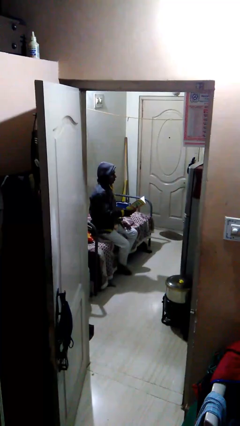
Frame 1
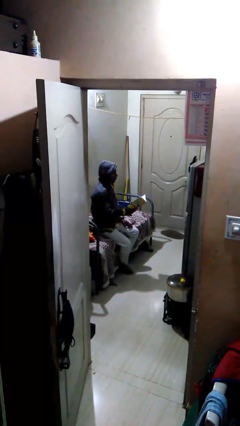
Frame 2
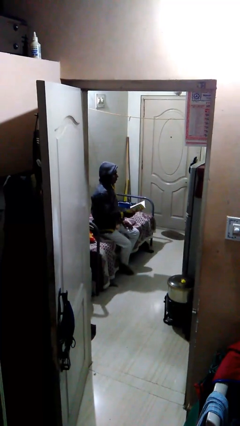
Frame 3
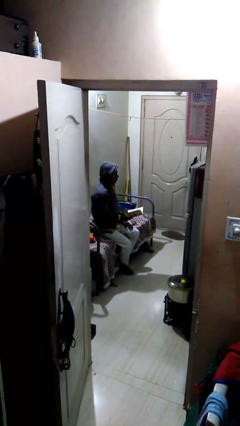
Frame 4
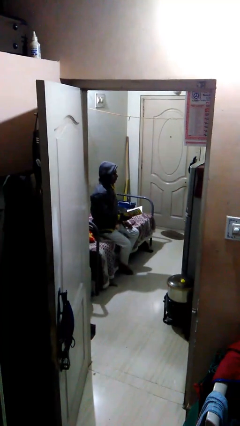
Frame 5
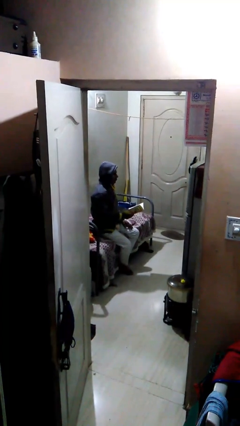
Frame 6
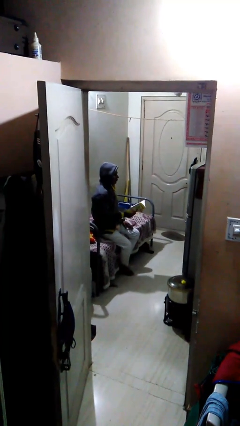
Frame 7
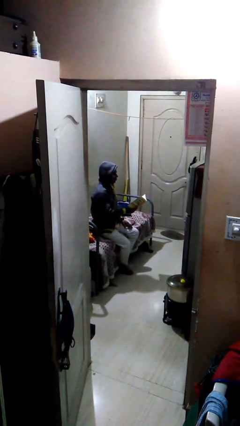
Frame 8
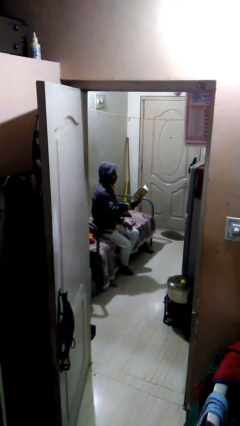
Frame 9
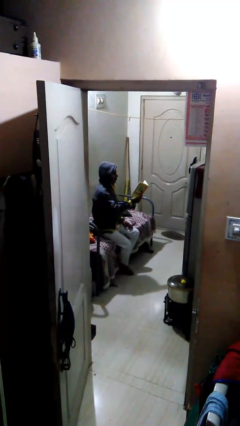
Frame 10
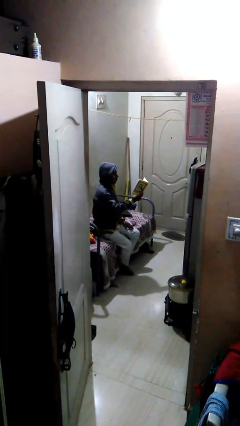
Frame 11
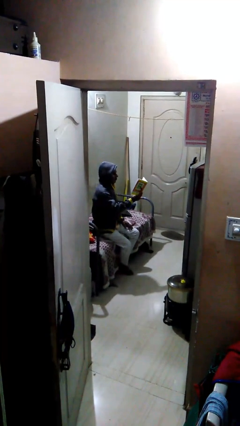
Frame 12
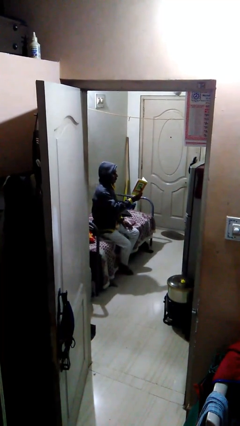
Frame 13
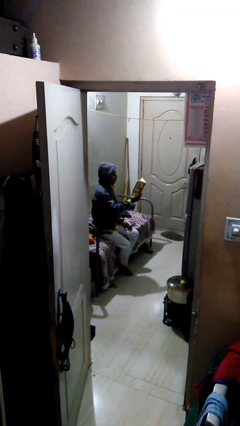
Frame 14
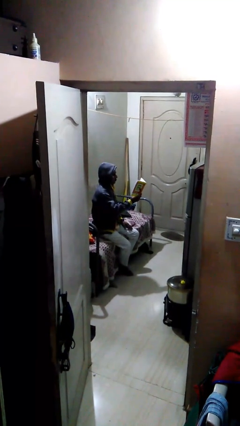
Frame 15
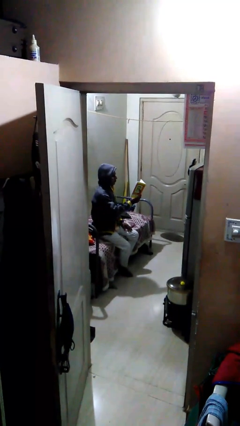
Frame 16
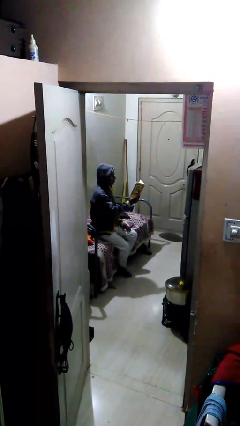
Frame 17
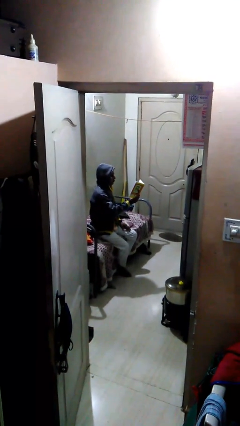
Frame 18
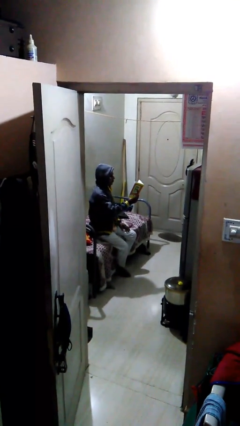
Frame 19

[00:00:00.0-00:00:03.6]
person reads document

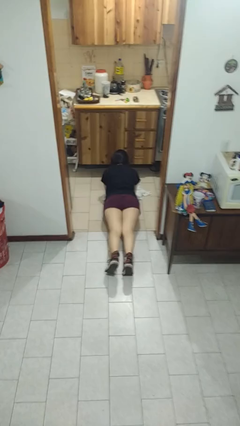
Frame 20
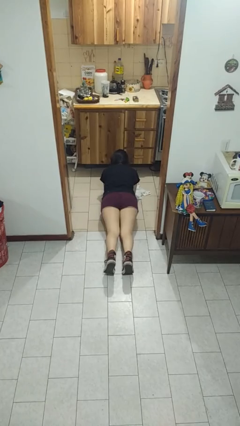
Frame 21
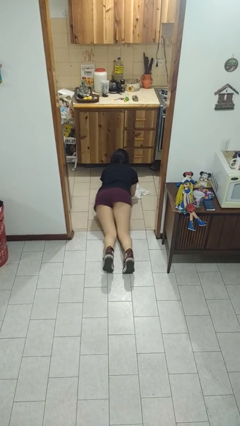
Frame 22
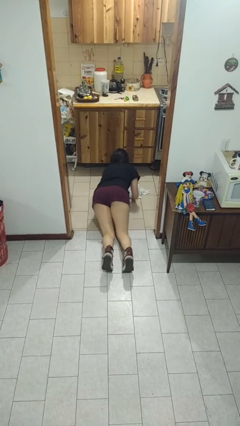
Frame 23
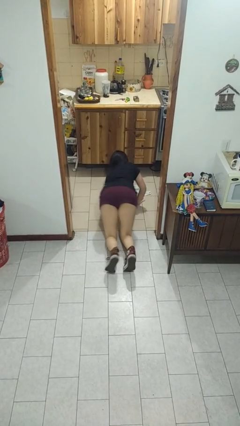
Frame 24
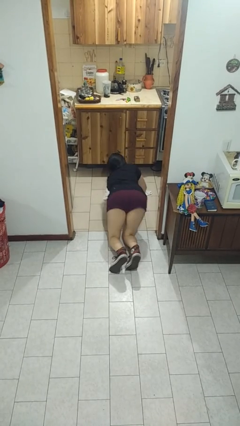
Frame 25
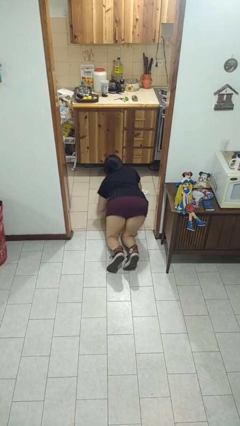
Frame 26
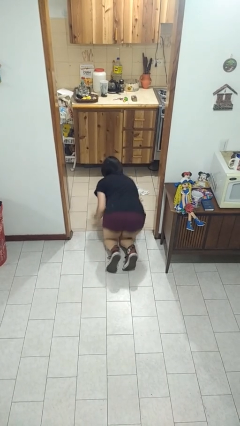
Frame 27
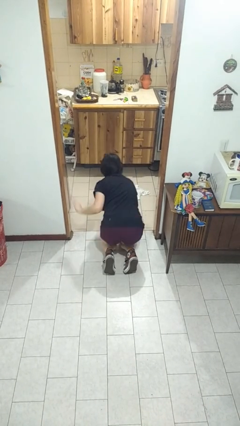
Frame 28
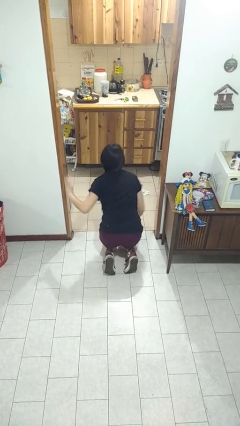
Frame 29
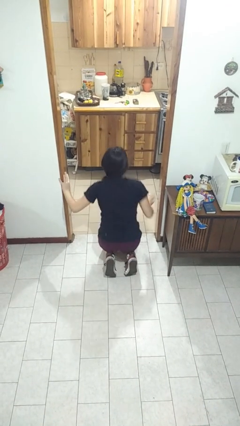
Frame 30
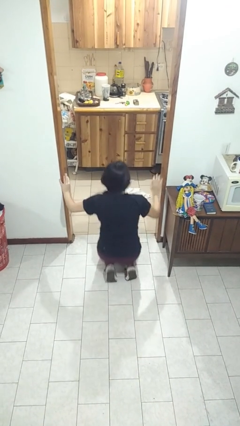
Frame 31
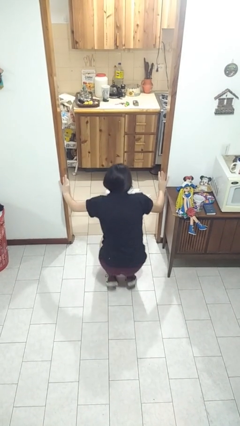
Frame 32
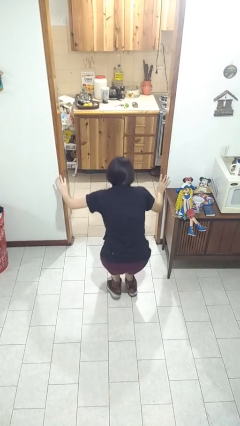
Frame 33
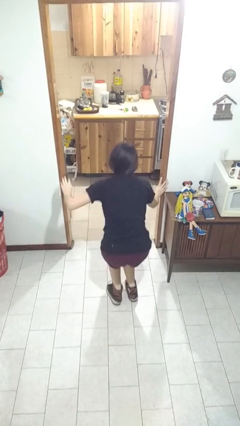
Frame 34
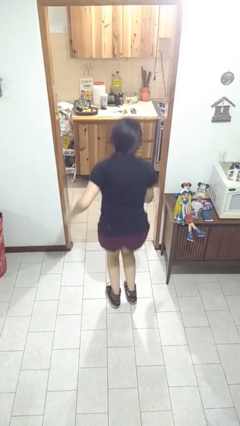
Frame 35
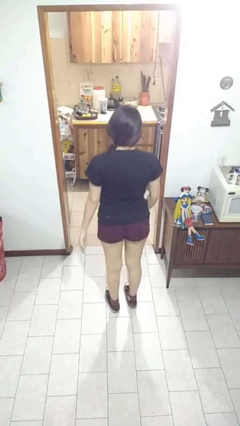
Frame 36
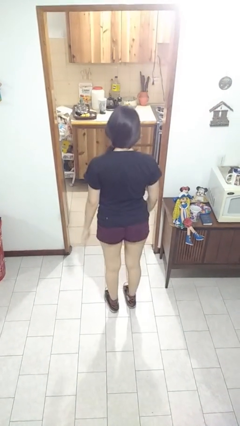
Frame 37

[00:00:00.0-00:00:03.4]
person stands up from floor

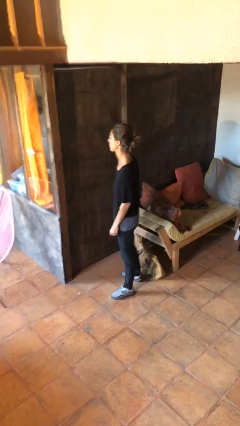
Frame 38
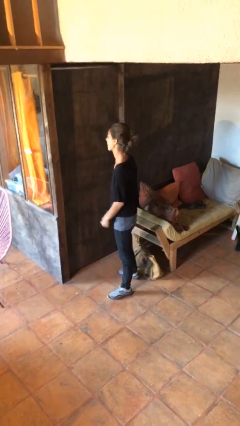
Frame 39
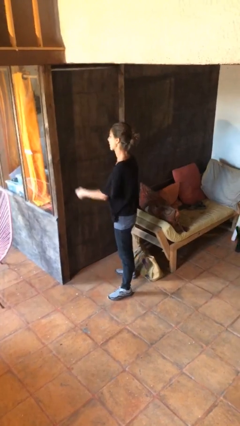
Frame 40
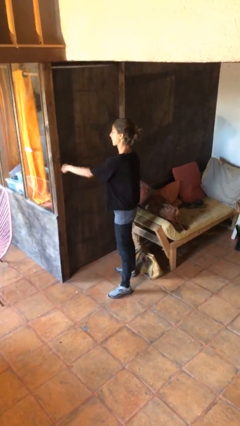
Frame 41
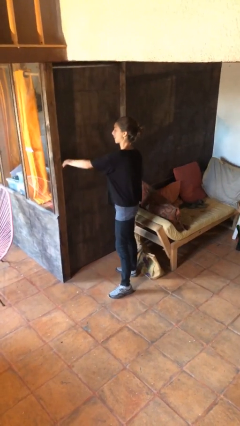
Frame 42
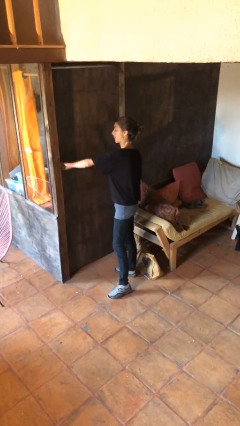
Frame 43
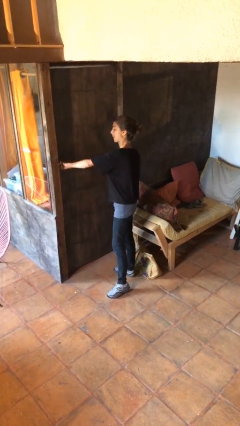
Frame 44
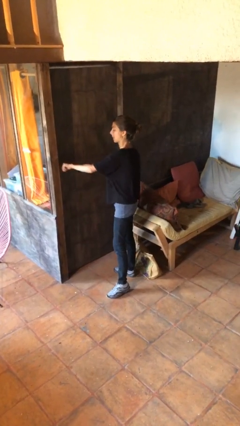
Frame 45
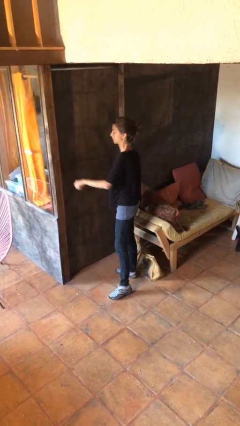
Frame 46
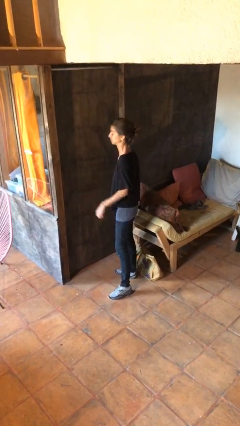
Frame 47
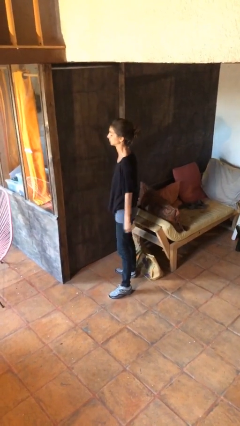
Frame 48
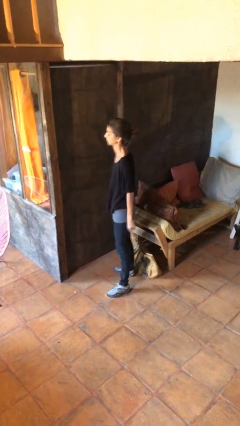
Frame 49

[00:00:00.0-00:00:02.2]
person unlocks door with keys

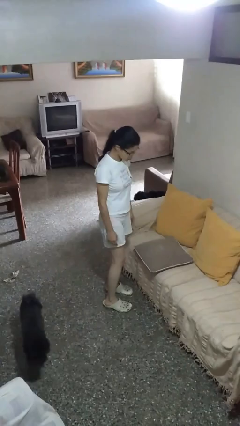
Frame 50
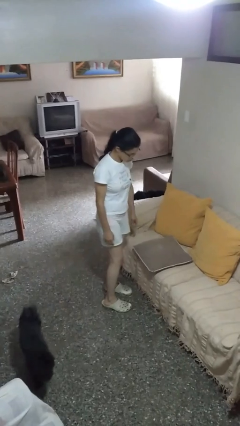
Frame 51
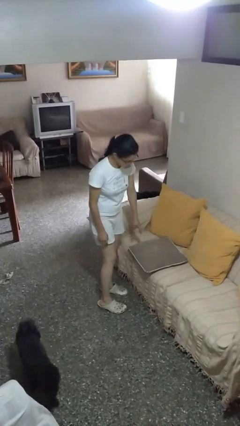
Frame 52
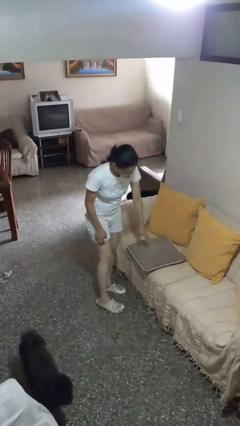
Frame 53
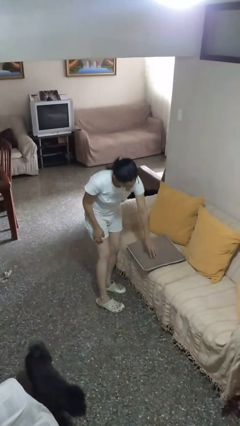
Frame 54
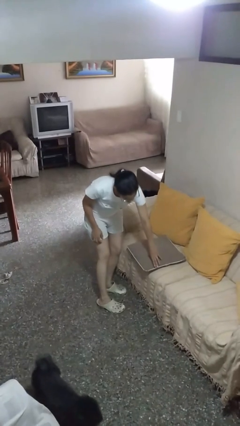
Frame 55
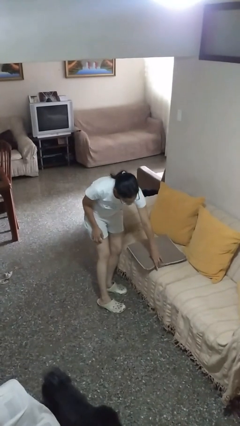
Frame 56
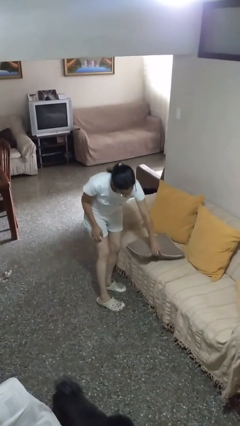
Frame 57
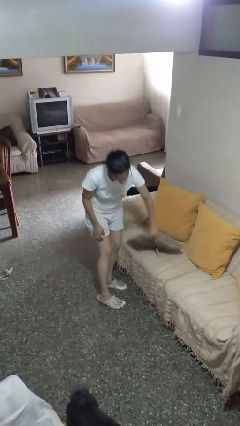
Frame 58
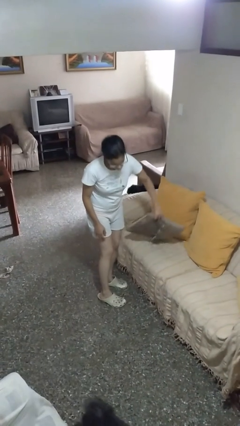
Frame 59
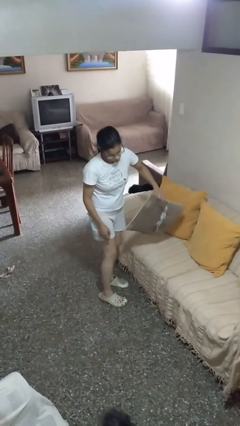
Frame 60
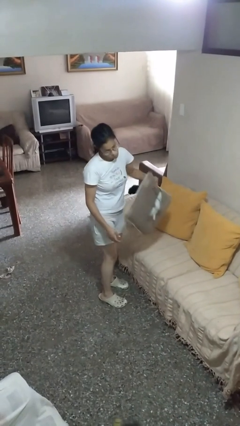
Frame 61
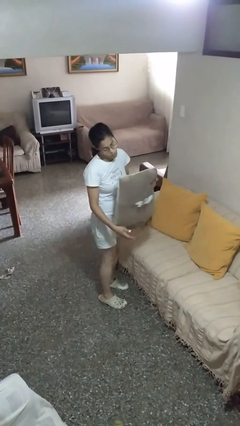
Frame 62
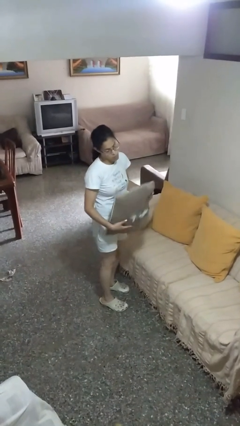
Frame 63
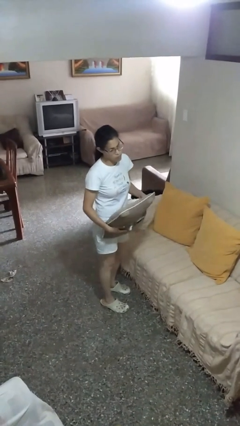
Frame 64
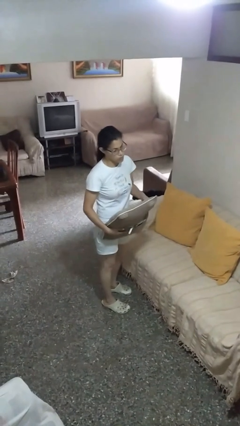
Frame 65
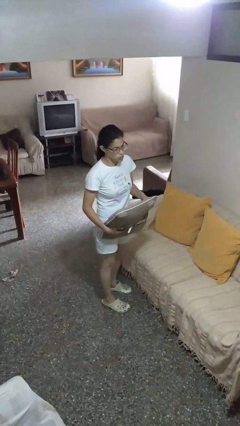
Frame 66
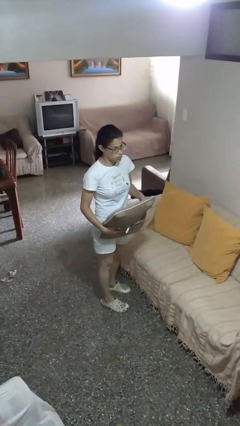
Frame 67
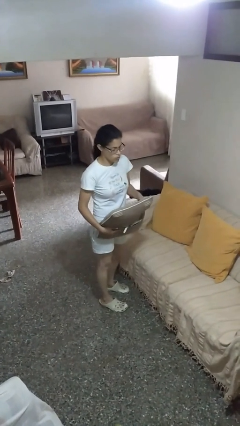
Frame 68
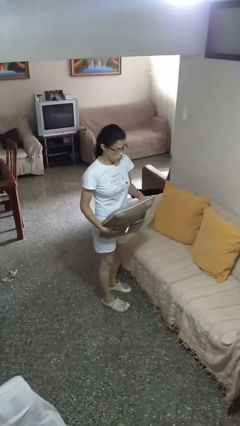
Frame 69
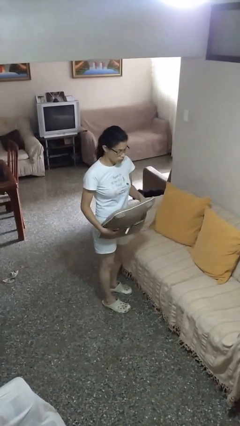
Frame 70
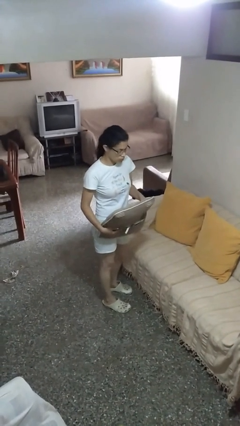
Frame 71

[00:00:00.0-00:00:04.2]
person picks up object from couch

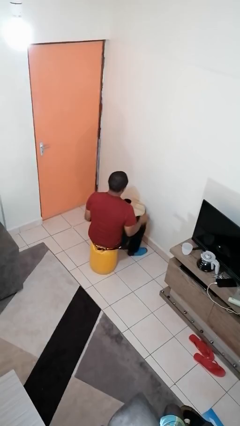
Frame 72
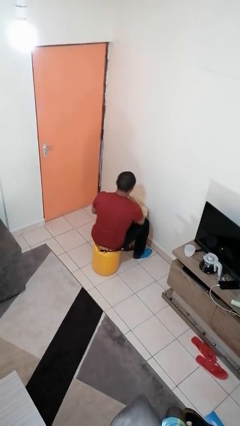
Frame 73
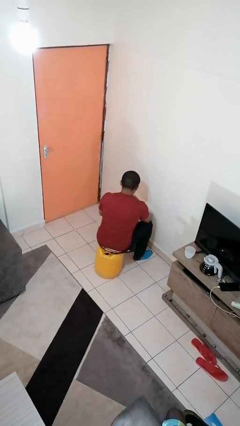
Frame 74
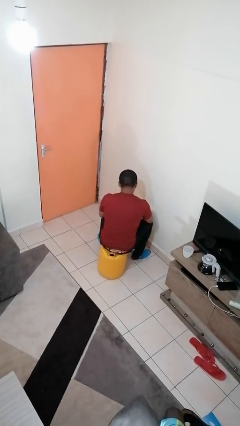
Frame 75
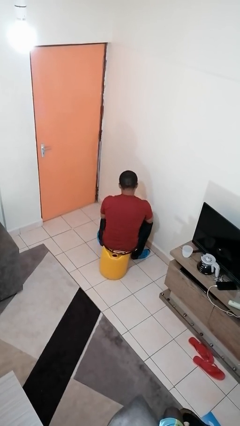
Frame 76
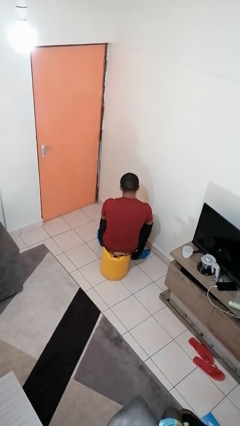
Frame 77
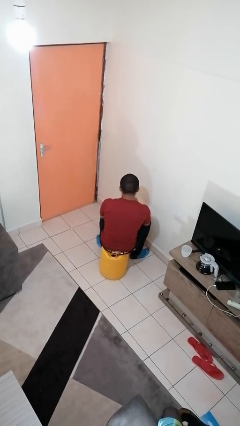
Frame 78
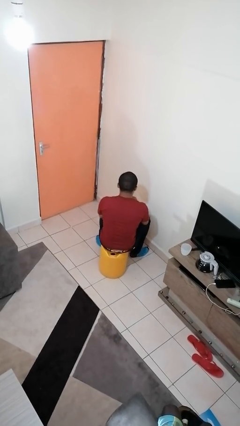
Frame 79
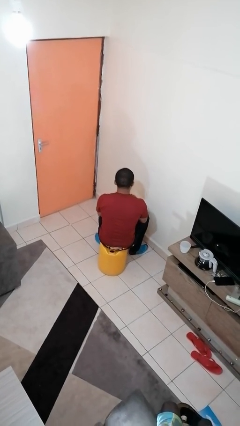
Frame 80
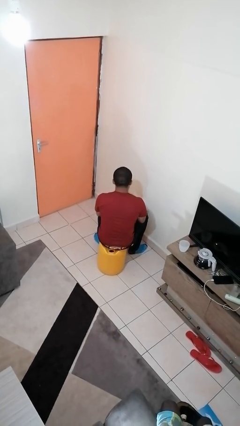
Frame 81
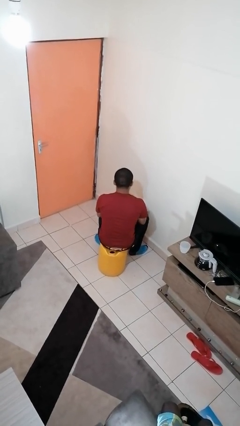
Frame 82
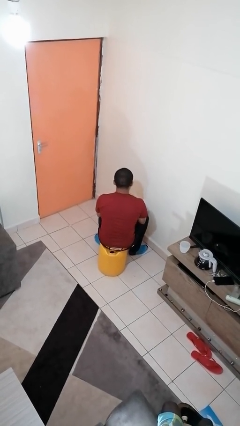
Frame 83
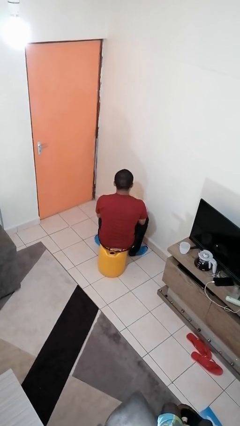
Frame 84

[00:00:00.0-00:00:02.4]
person stirs mug

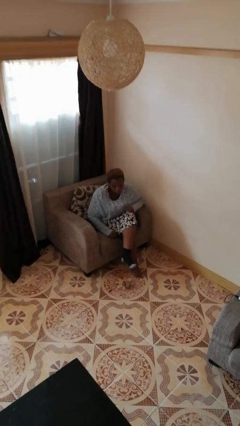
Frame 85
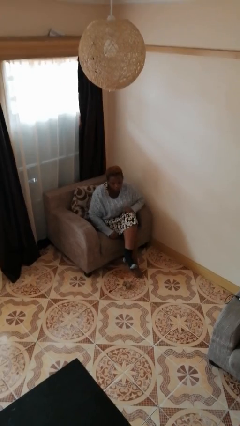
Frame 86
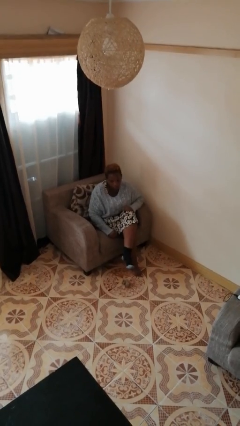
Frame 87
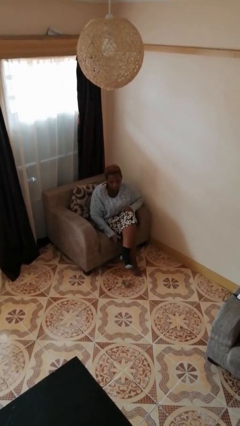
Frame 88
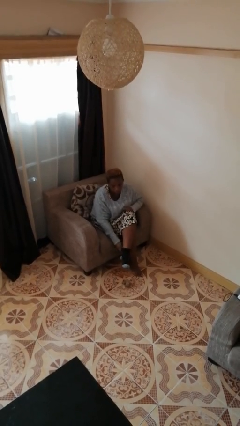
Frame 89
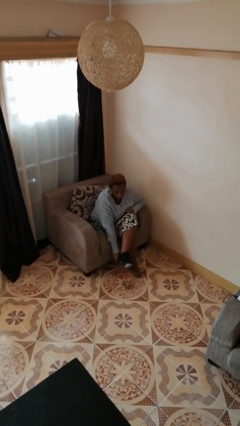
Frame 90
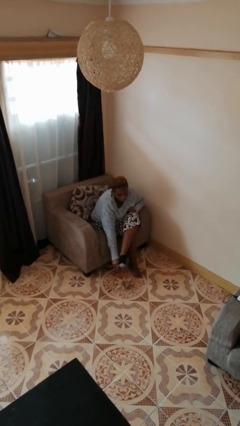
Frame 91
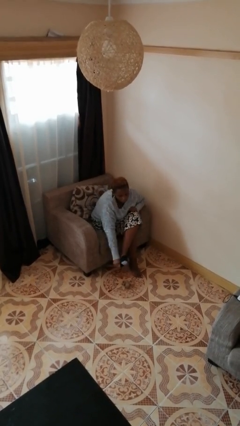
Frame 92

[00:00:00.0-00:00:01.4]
person takes off socks

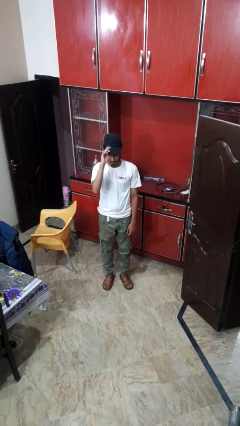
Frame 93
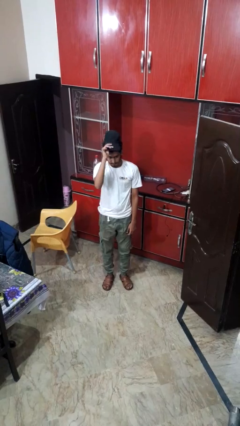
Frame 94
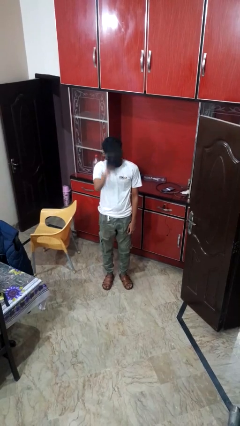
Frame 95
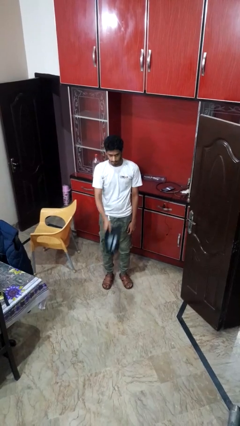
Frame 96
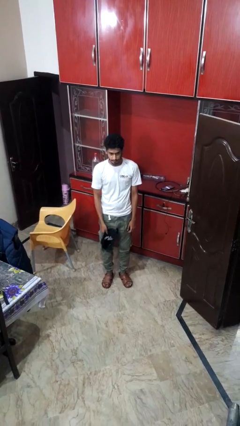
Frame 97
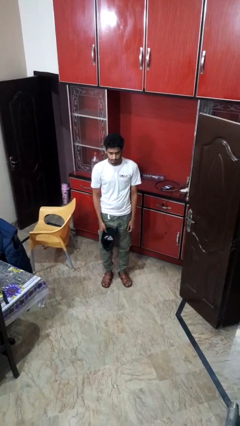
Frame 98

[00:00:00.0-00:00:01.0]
person takes off hat
